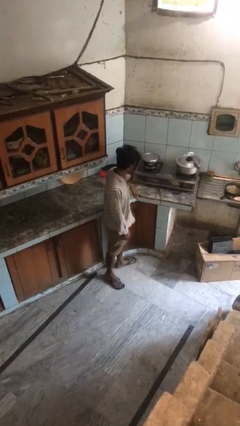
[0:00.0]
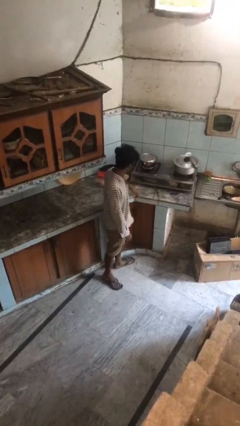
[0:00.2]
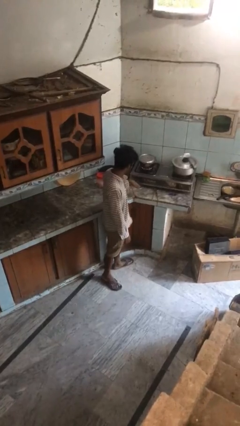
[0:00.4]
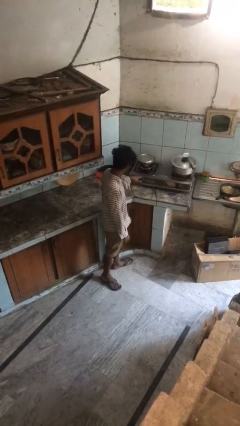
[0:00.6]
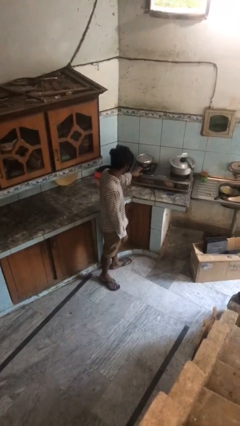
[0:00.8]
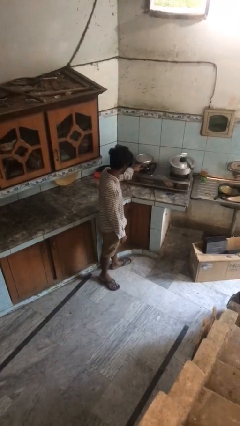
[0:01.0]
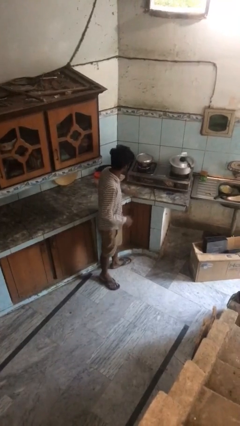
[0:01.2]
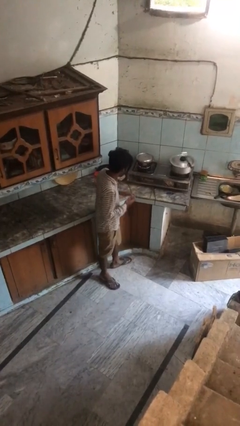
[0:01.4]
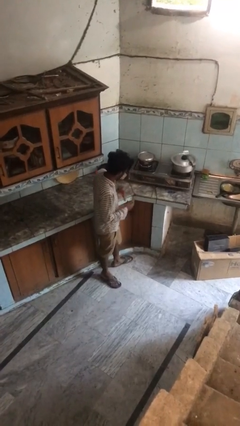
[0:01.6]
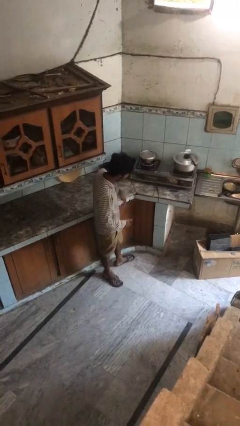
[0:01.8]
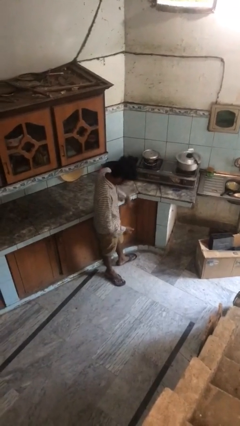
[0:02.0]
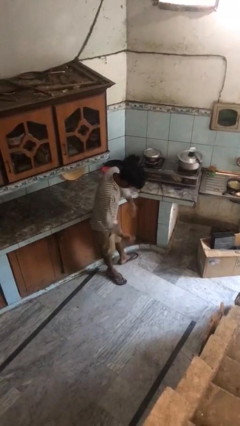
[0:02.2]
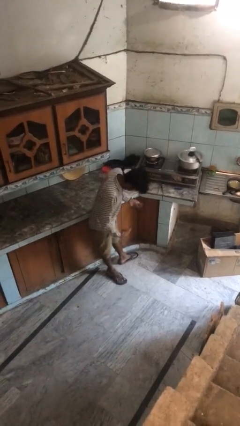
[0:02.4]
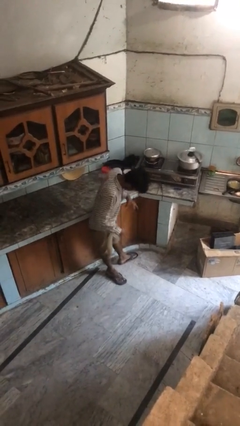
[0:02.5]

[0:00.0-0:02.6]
person burns hand

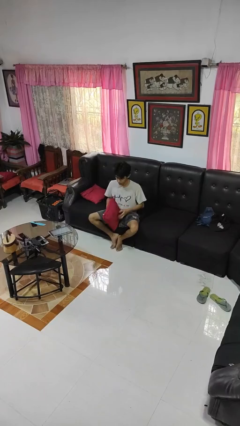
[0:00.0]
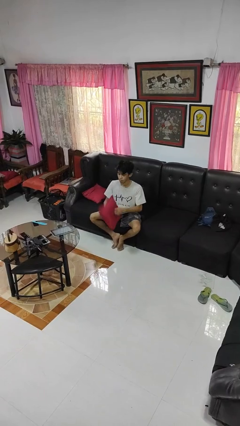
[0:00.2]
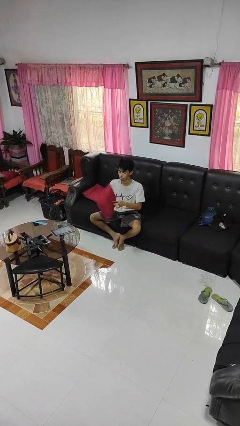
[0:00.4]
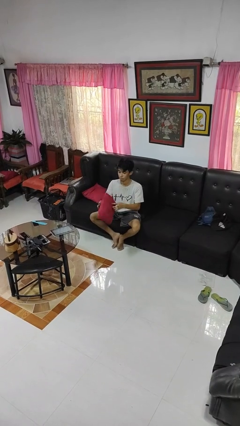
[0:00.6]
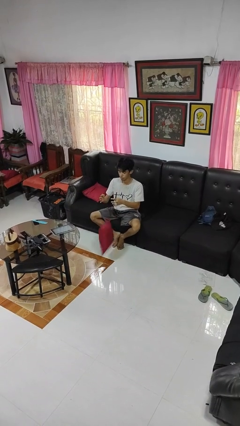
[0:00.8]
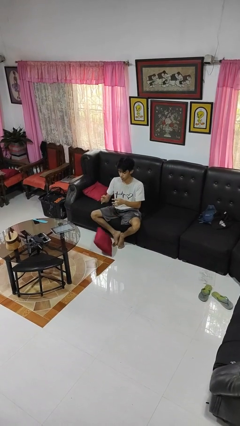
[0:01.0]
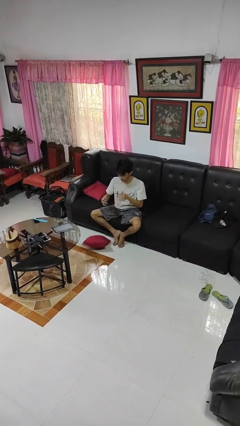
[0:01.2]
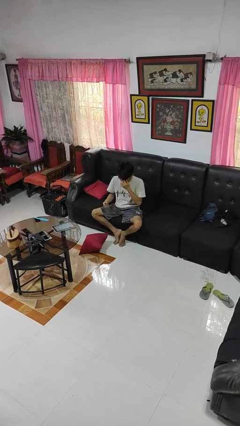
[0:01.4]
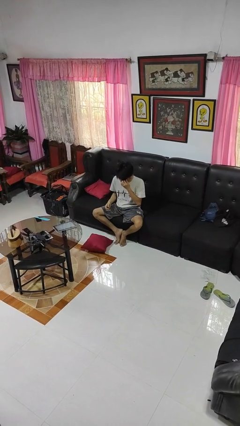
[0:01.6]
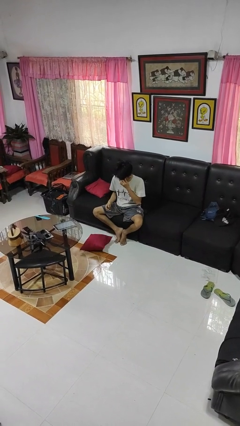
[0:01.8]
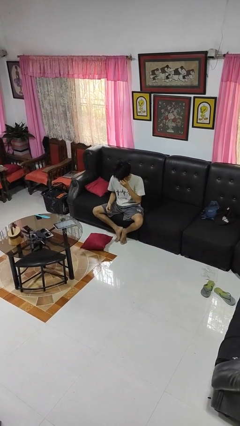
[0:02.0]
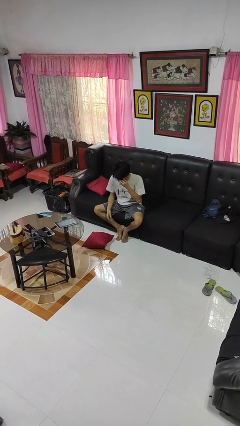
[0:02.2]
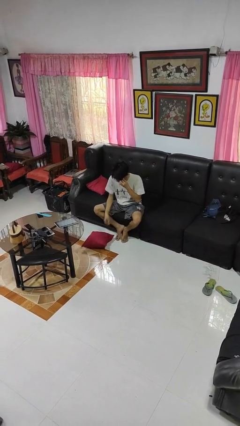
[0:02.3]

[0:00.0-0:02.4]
person drops object

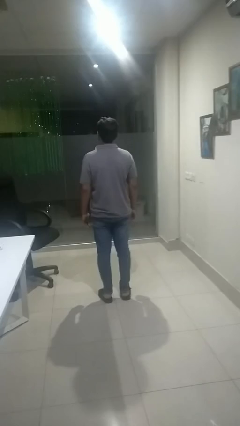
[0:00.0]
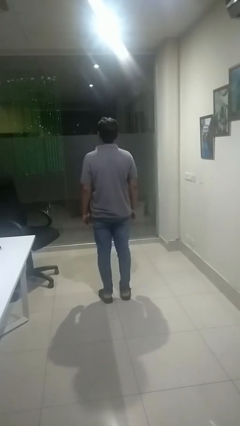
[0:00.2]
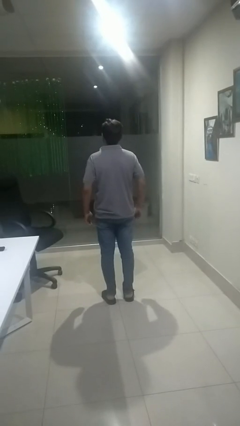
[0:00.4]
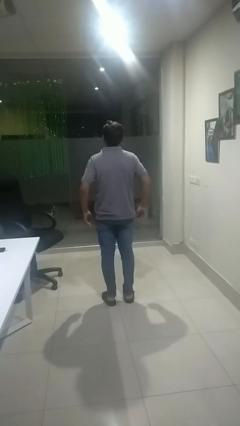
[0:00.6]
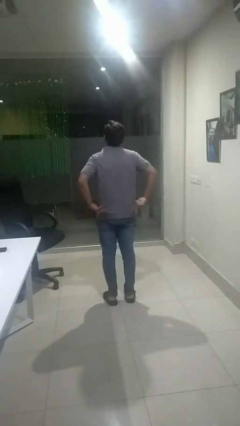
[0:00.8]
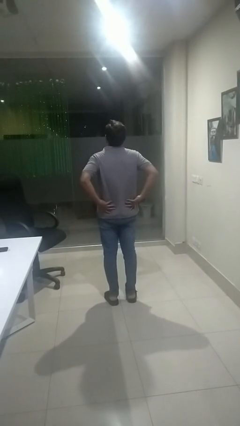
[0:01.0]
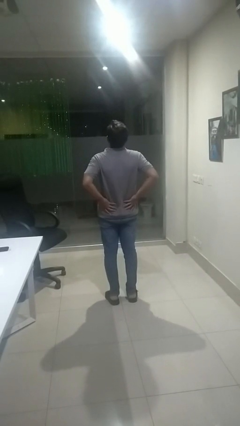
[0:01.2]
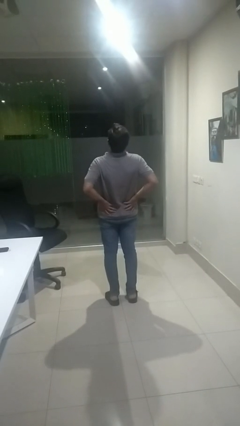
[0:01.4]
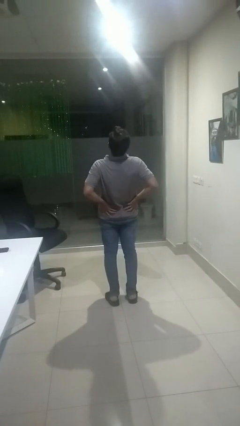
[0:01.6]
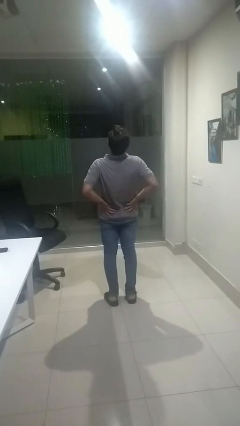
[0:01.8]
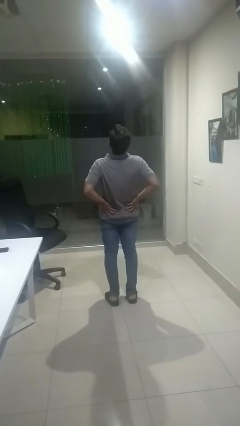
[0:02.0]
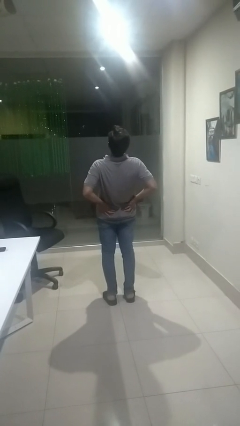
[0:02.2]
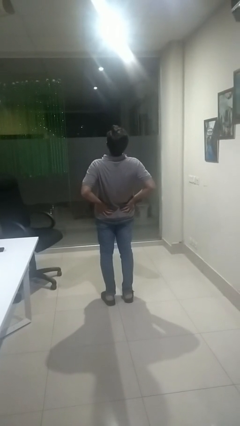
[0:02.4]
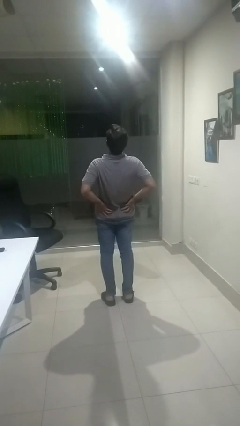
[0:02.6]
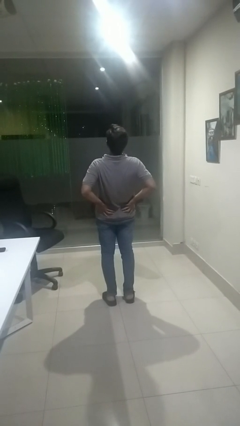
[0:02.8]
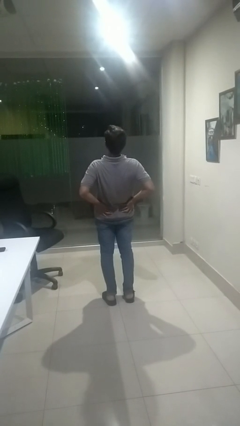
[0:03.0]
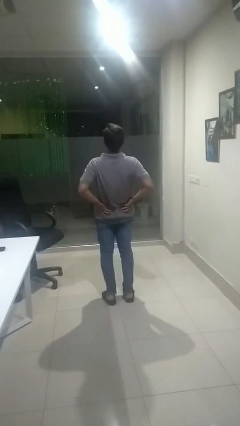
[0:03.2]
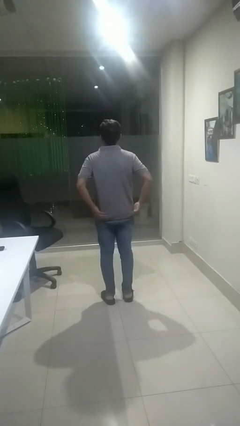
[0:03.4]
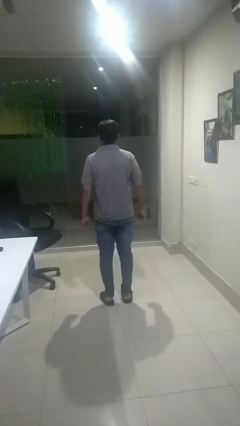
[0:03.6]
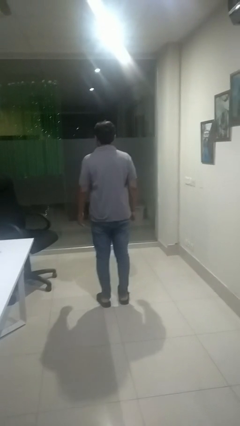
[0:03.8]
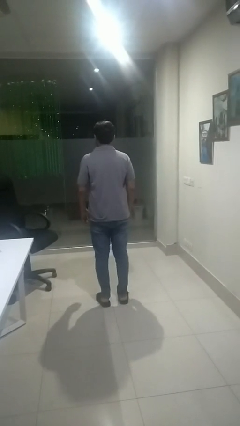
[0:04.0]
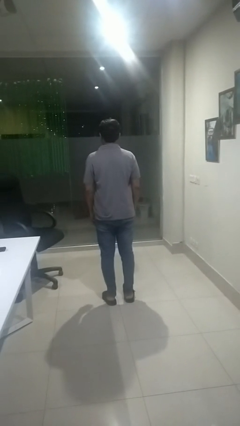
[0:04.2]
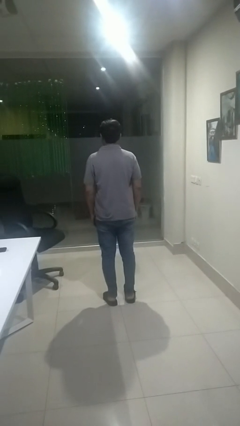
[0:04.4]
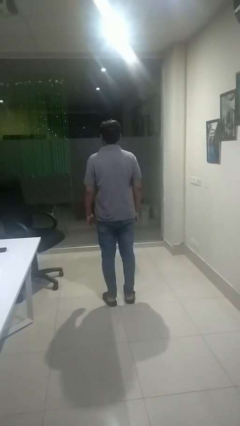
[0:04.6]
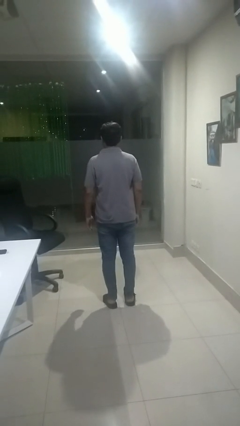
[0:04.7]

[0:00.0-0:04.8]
person stretches back

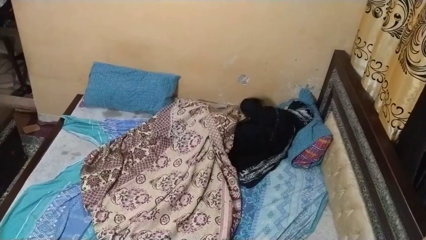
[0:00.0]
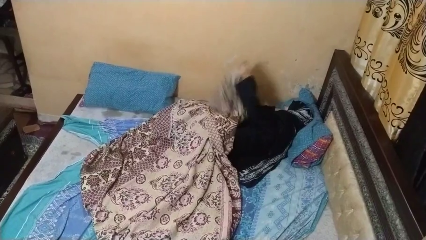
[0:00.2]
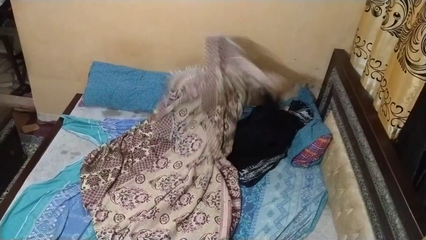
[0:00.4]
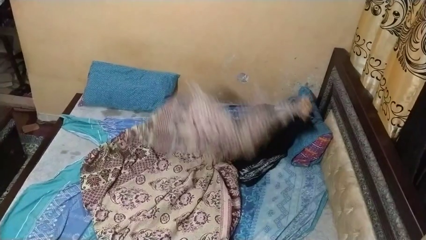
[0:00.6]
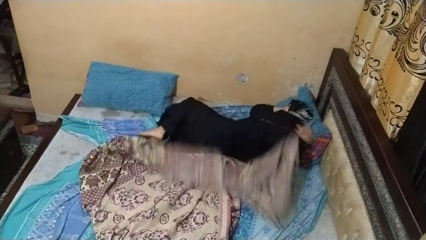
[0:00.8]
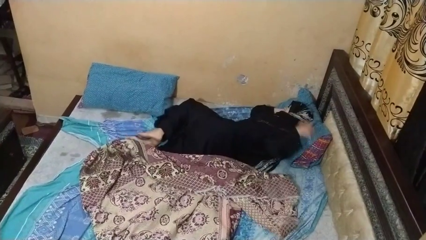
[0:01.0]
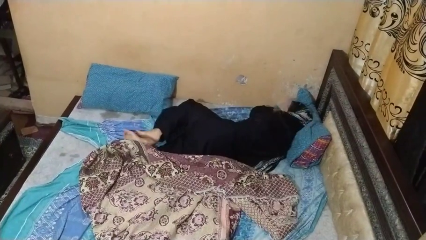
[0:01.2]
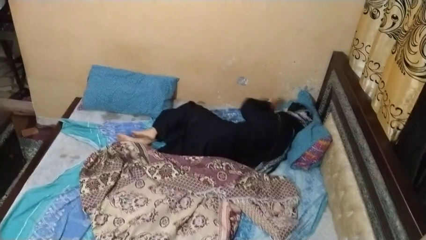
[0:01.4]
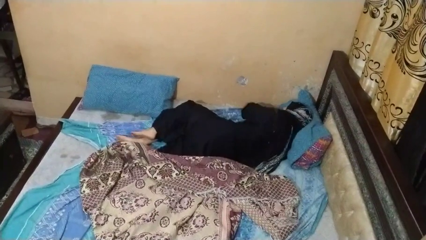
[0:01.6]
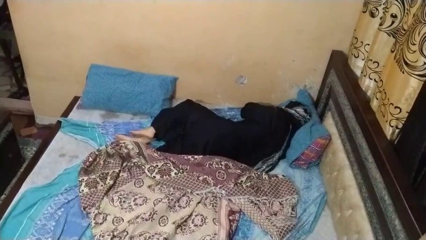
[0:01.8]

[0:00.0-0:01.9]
person uncovers with blanket

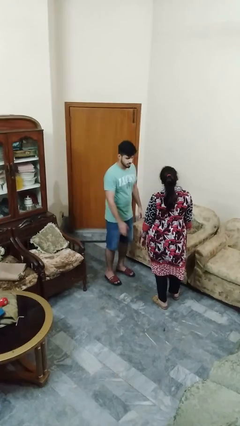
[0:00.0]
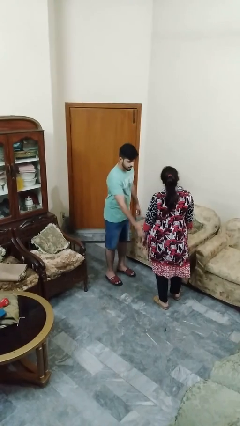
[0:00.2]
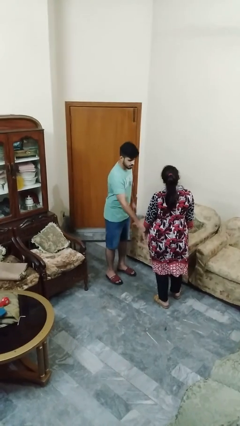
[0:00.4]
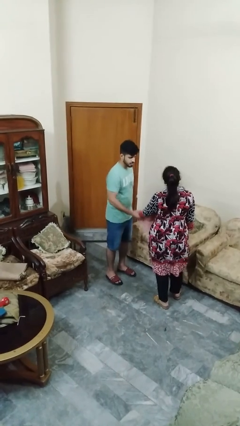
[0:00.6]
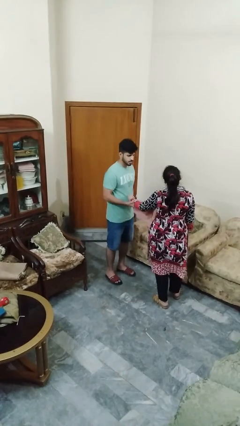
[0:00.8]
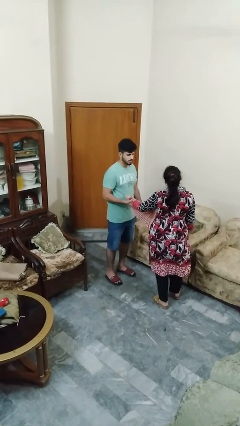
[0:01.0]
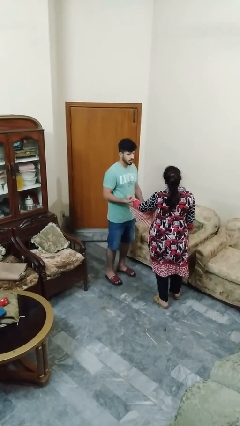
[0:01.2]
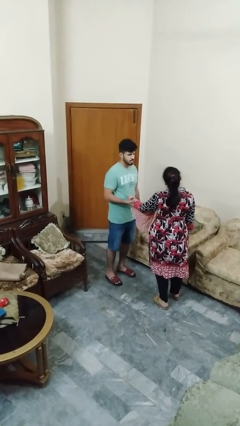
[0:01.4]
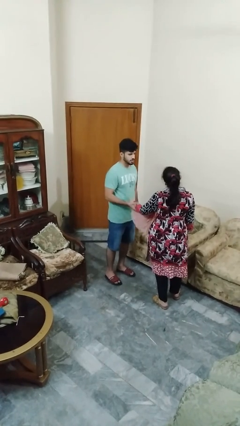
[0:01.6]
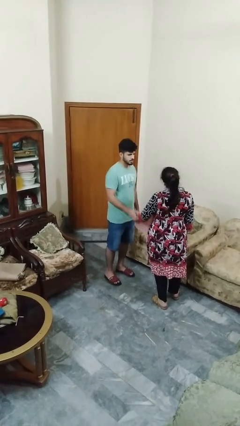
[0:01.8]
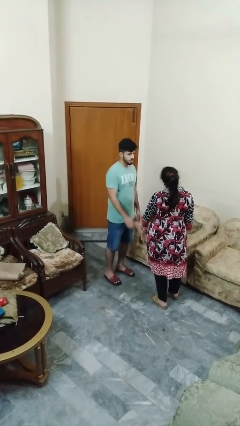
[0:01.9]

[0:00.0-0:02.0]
person grabs person by forearm

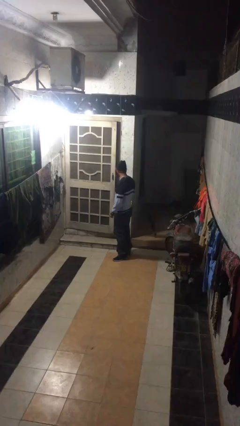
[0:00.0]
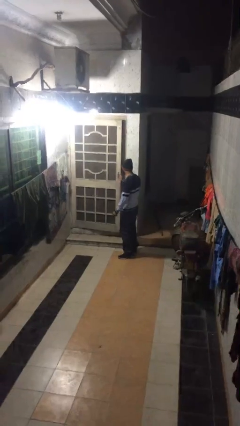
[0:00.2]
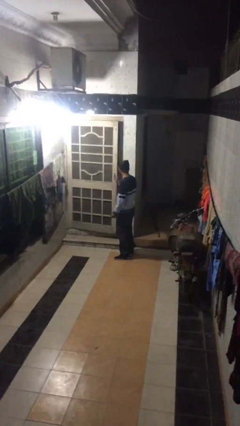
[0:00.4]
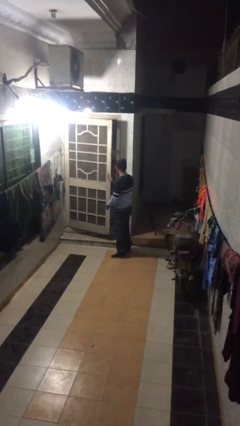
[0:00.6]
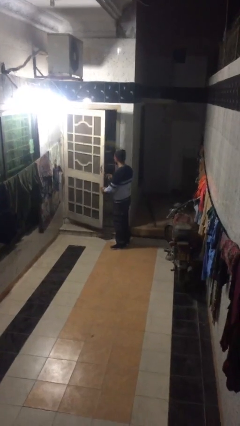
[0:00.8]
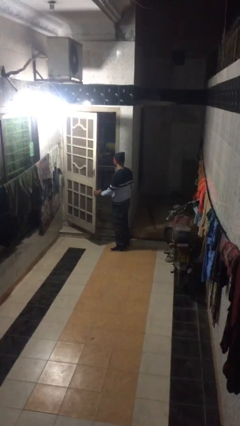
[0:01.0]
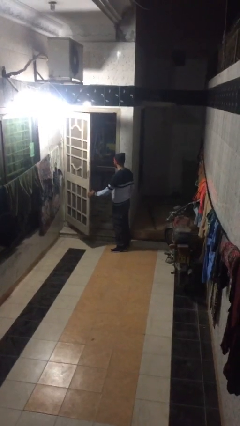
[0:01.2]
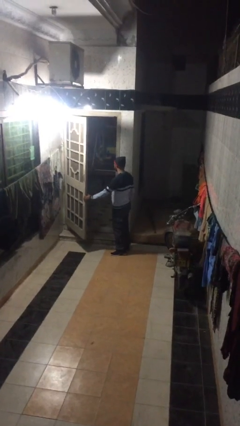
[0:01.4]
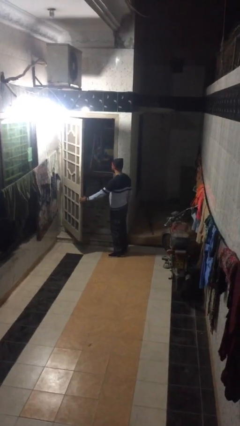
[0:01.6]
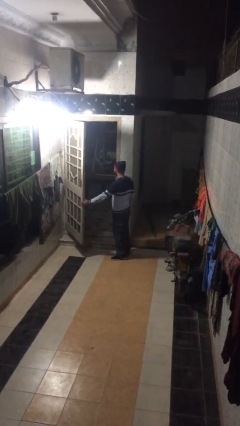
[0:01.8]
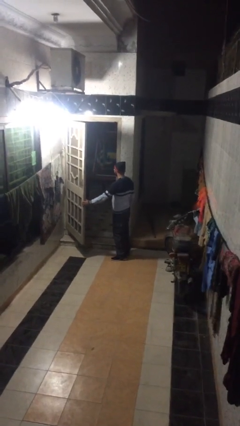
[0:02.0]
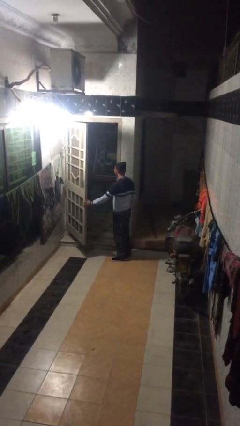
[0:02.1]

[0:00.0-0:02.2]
person opens facility door

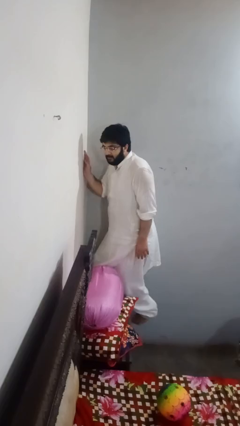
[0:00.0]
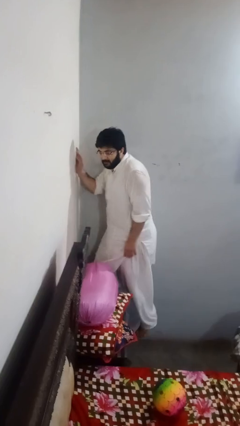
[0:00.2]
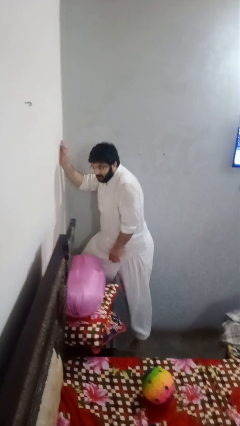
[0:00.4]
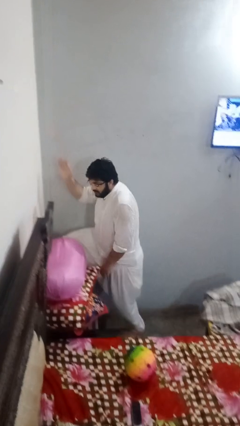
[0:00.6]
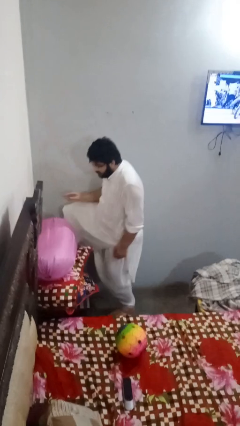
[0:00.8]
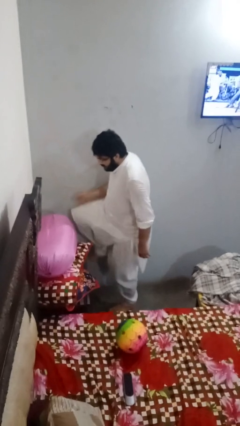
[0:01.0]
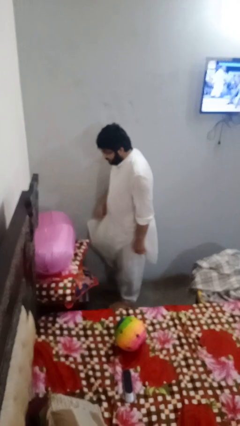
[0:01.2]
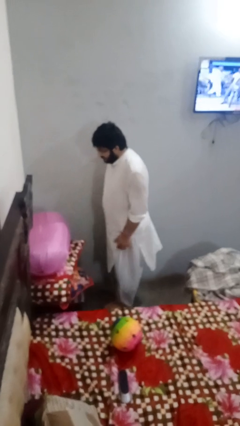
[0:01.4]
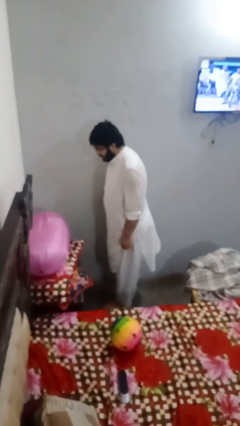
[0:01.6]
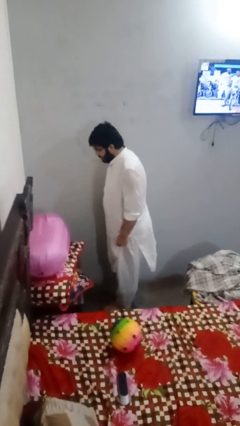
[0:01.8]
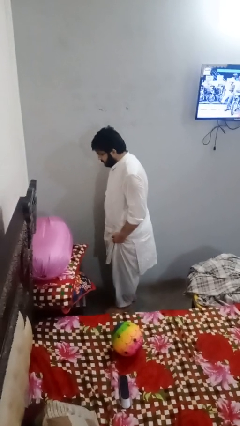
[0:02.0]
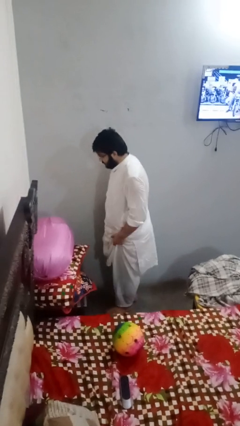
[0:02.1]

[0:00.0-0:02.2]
person climbs off table
